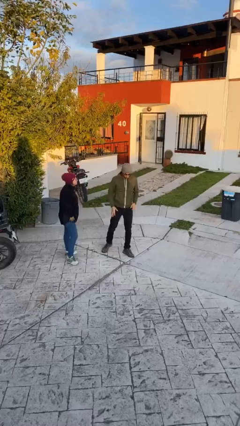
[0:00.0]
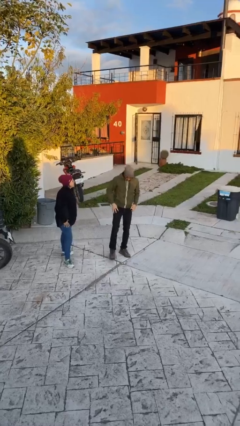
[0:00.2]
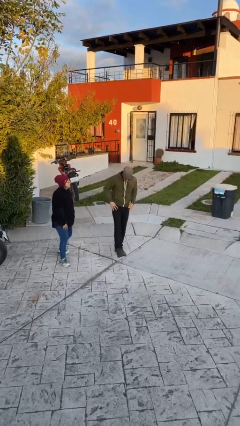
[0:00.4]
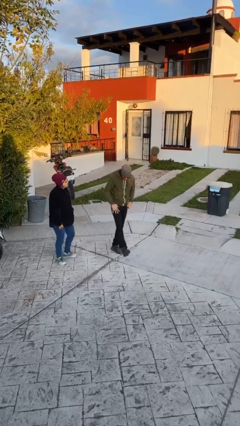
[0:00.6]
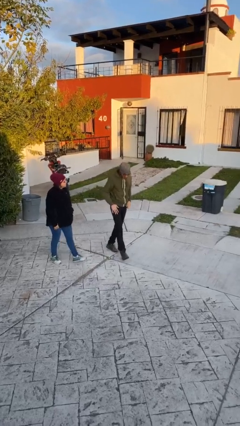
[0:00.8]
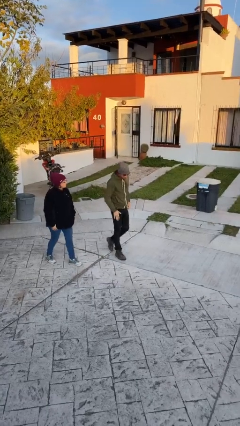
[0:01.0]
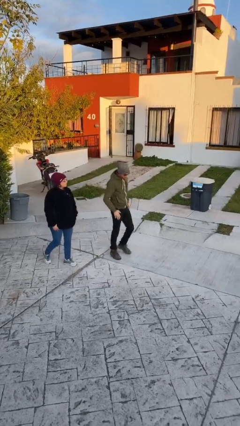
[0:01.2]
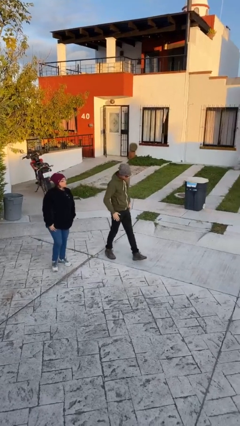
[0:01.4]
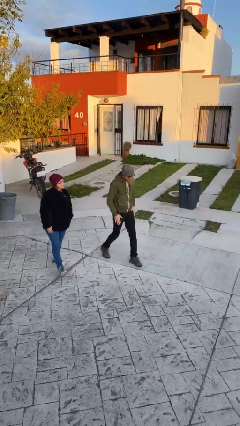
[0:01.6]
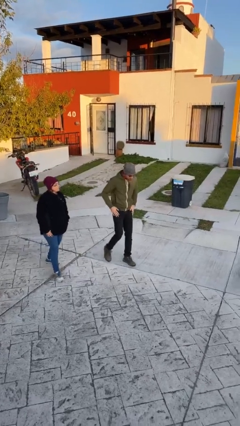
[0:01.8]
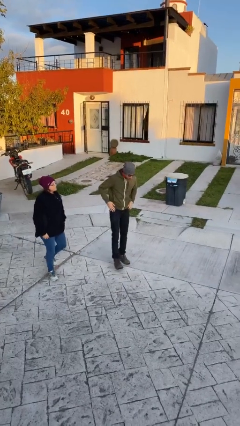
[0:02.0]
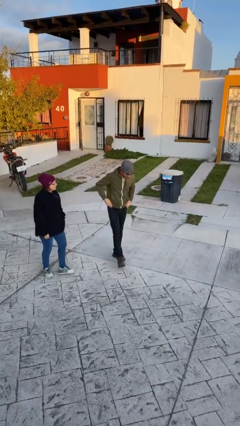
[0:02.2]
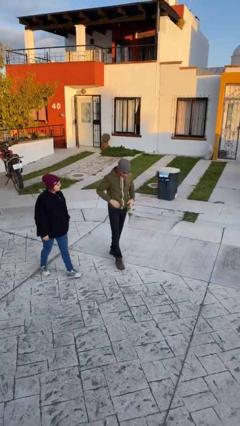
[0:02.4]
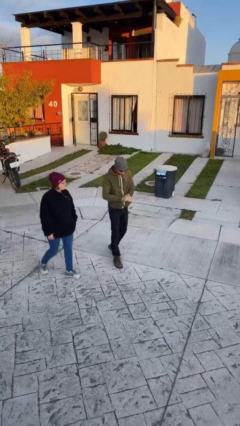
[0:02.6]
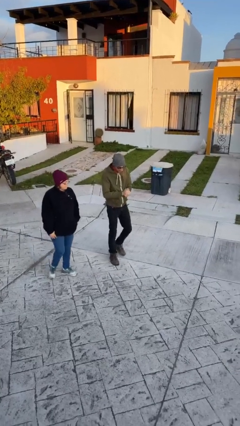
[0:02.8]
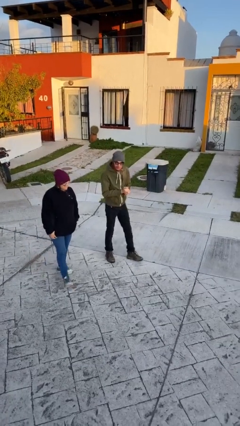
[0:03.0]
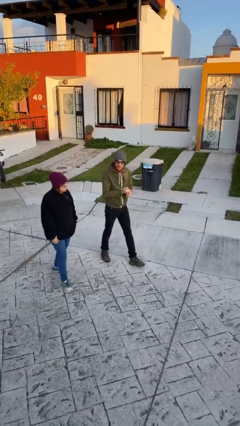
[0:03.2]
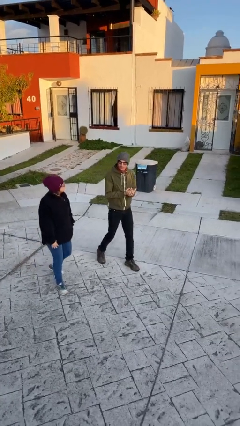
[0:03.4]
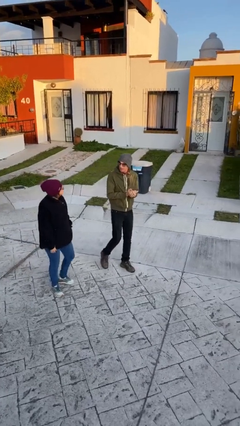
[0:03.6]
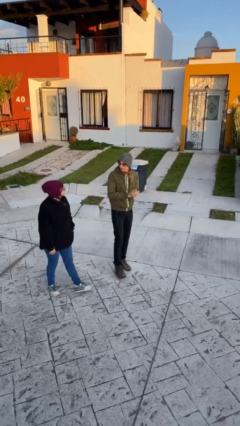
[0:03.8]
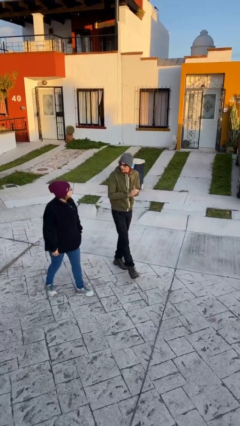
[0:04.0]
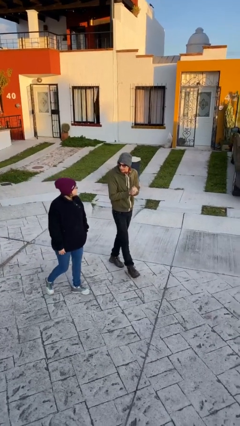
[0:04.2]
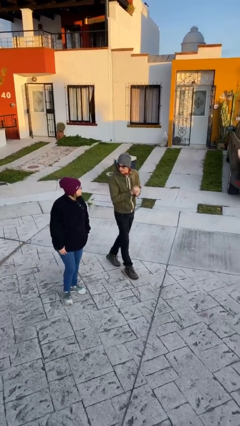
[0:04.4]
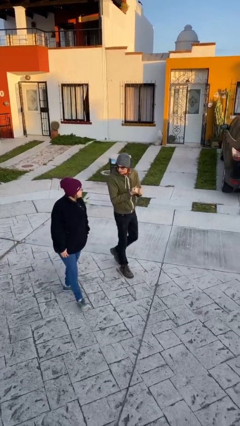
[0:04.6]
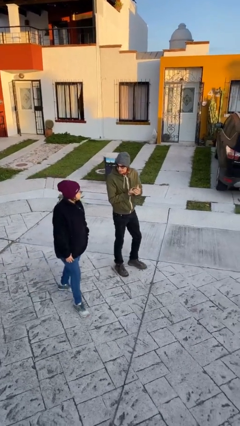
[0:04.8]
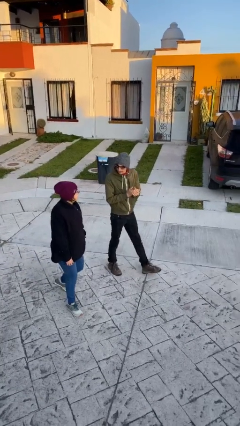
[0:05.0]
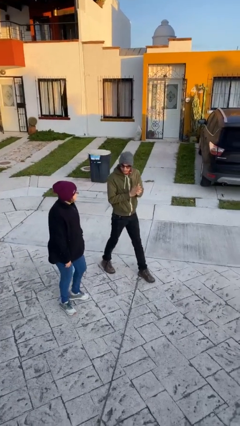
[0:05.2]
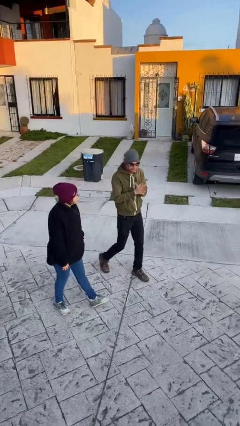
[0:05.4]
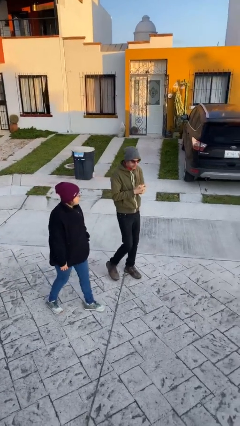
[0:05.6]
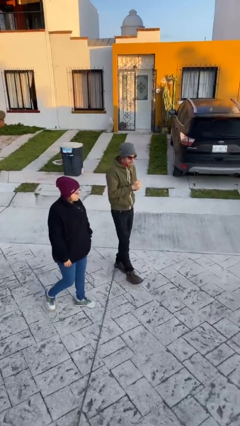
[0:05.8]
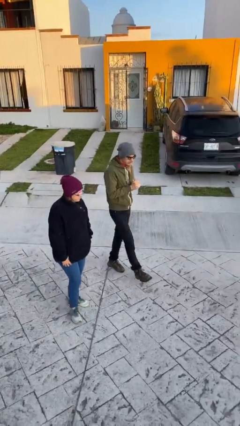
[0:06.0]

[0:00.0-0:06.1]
person talks to person

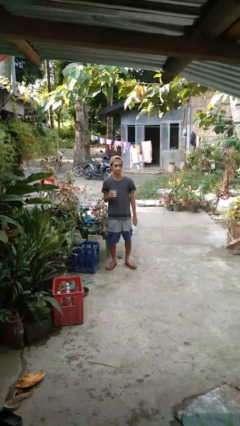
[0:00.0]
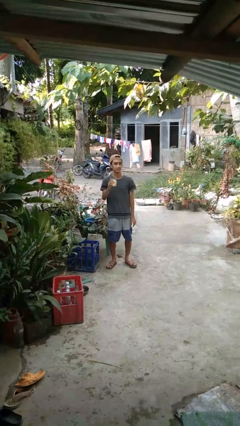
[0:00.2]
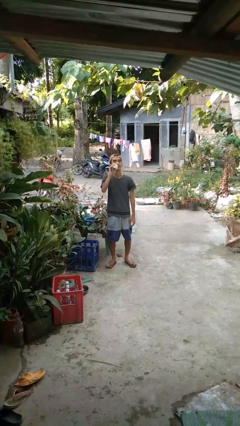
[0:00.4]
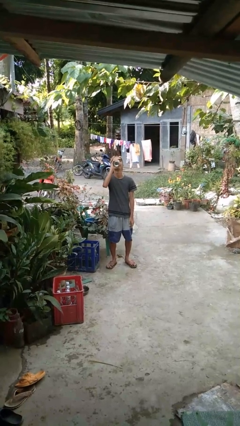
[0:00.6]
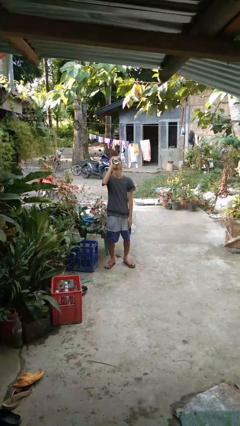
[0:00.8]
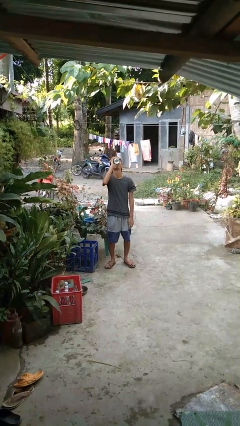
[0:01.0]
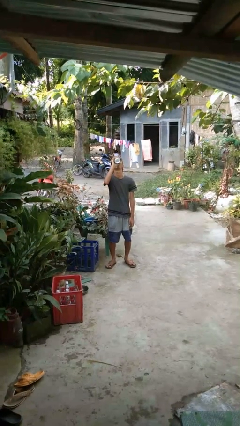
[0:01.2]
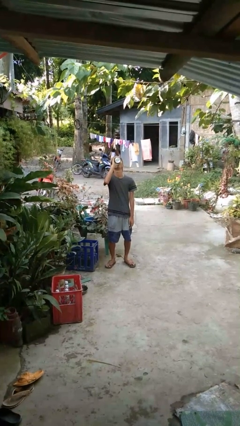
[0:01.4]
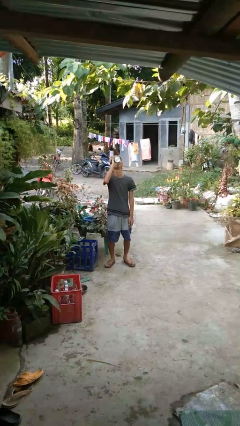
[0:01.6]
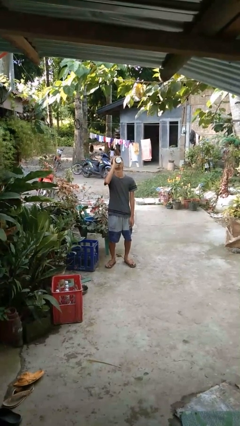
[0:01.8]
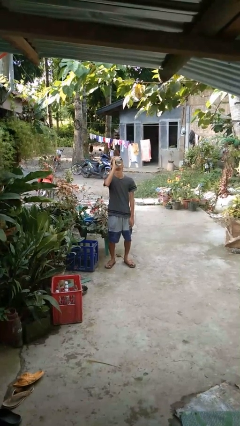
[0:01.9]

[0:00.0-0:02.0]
person drinks from beverage can

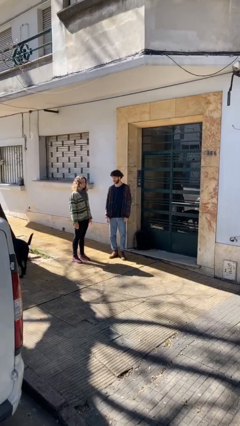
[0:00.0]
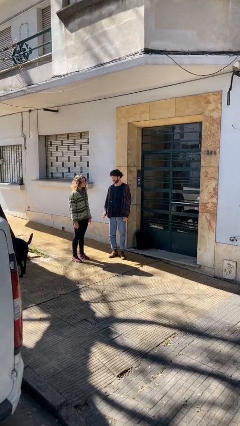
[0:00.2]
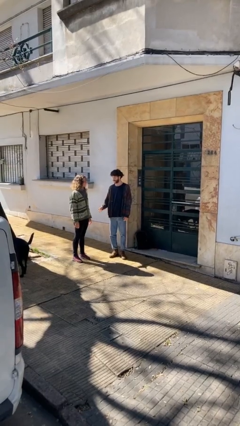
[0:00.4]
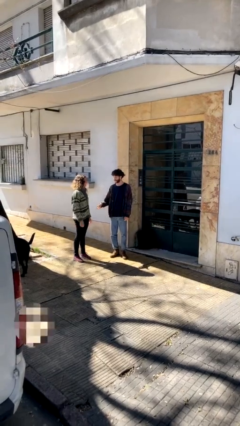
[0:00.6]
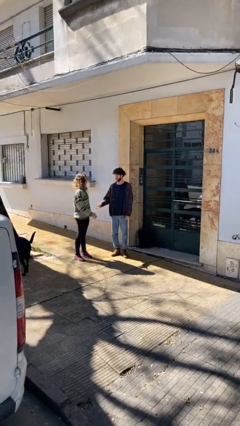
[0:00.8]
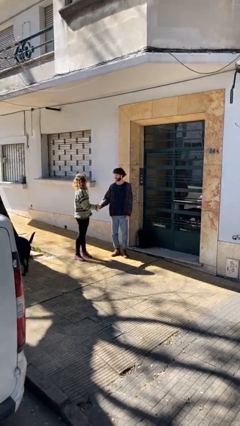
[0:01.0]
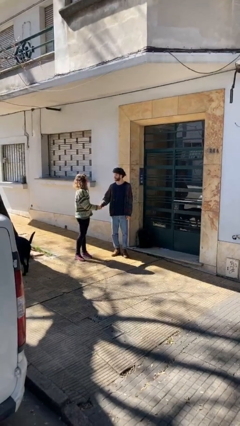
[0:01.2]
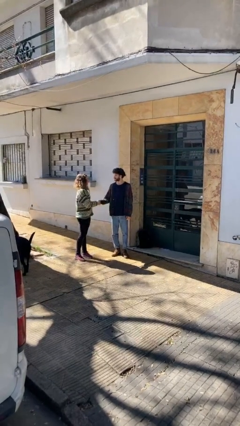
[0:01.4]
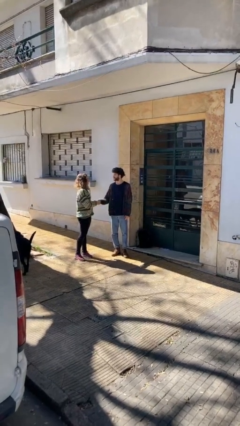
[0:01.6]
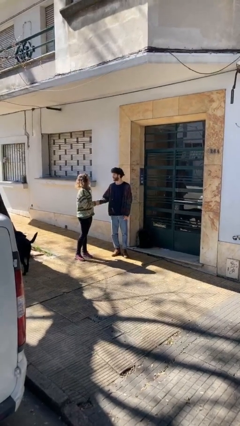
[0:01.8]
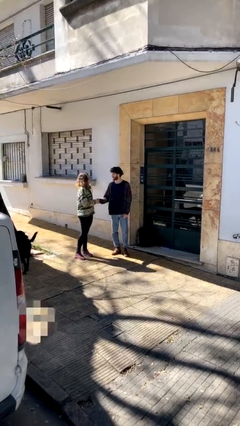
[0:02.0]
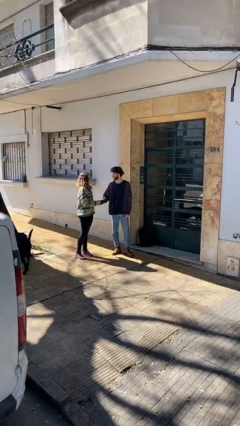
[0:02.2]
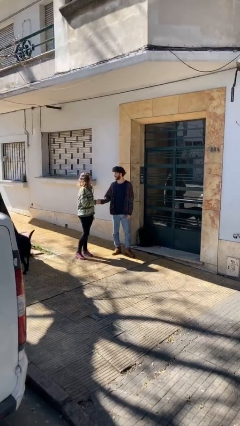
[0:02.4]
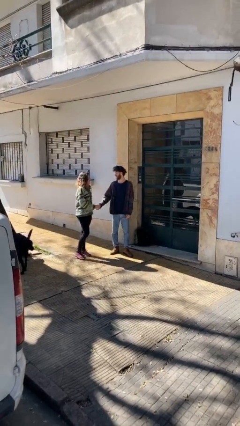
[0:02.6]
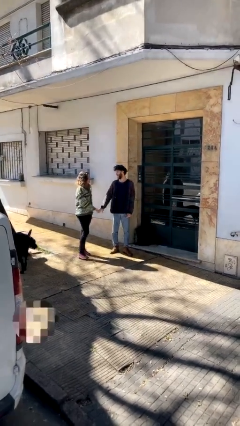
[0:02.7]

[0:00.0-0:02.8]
person shakes hand

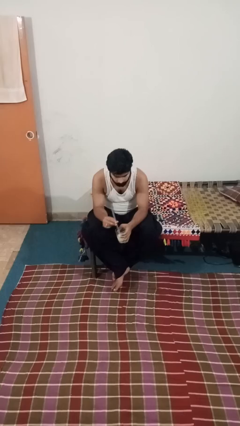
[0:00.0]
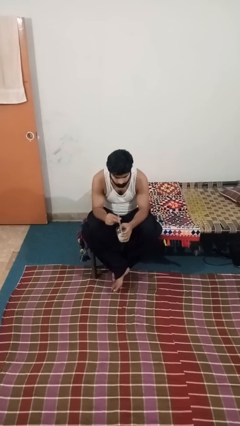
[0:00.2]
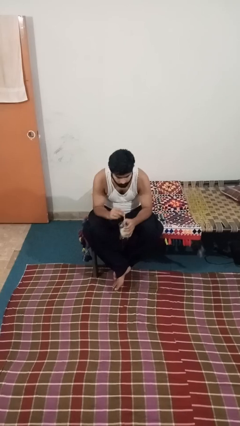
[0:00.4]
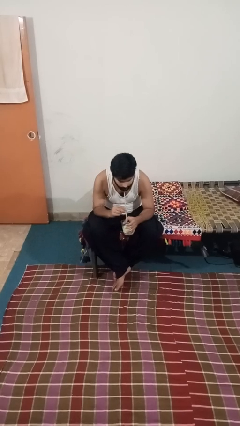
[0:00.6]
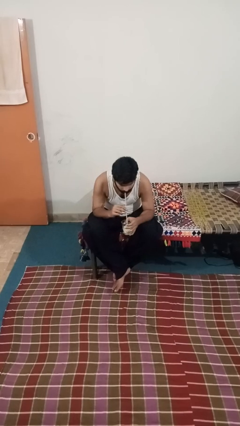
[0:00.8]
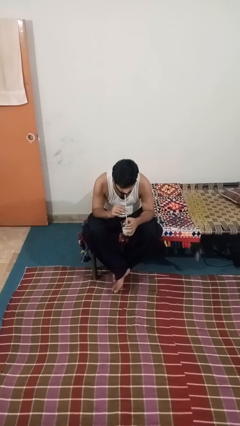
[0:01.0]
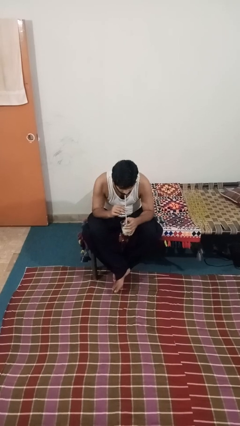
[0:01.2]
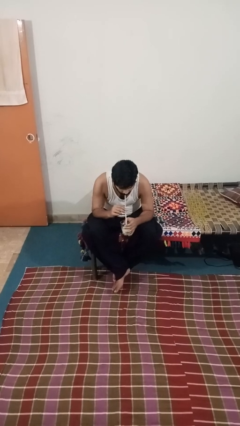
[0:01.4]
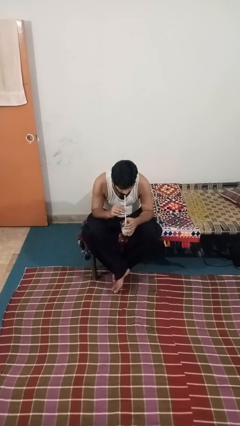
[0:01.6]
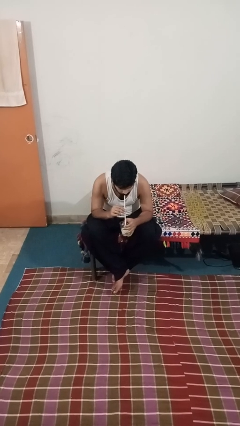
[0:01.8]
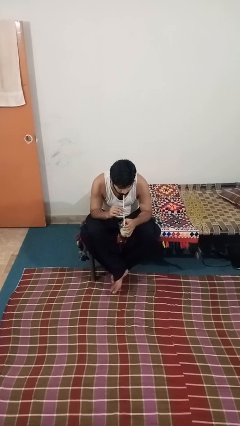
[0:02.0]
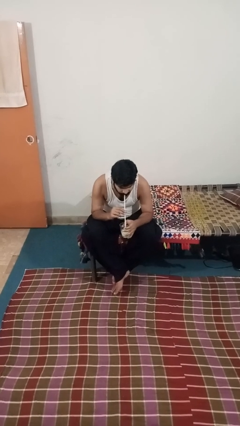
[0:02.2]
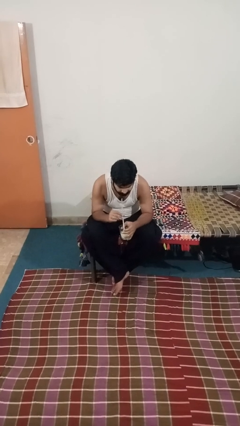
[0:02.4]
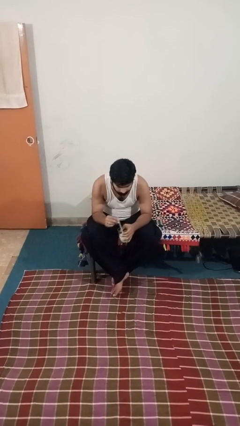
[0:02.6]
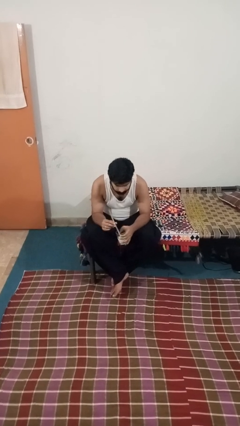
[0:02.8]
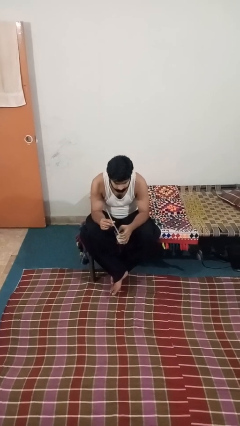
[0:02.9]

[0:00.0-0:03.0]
person drinks from straw

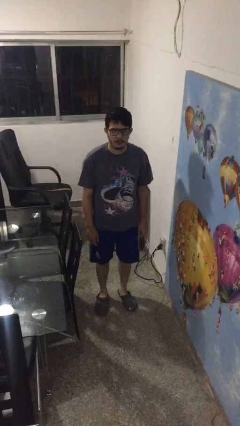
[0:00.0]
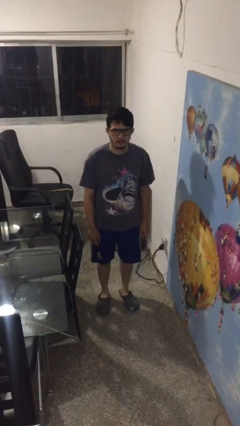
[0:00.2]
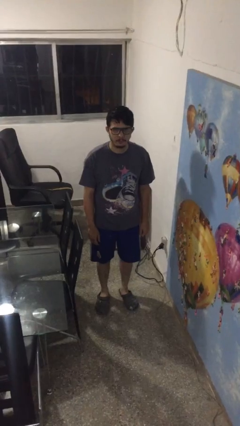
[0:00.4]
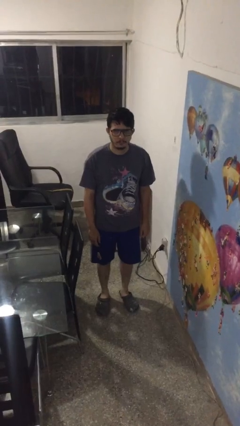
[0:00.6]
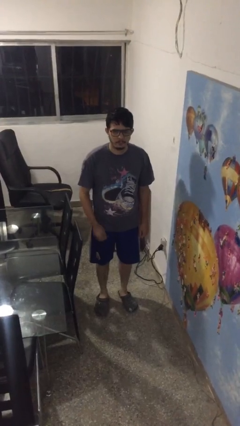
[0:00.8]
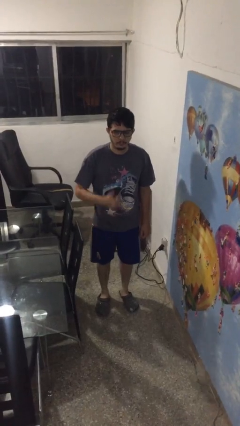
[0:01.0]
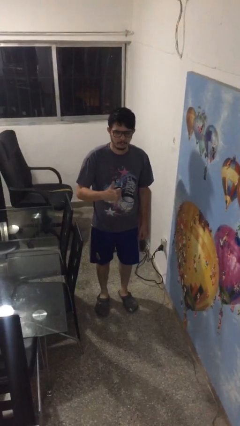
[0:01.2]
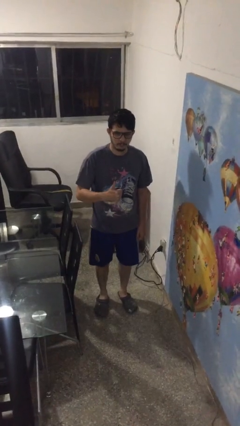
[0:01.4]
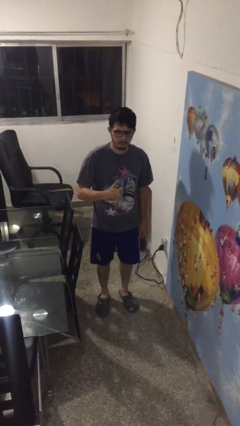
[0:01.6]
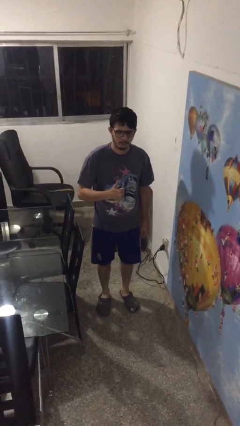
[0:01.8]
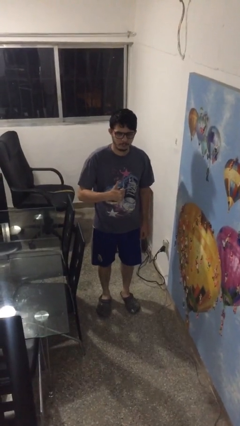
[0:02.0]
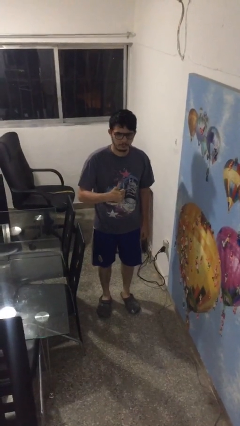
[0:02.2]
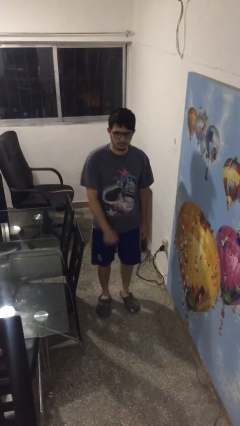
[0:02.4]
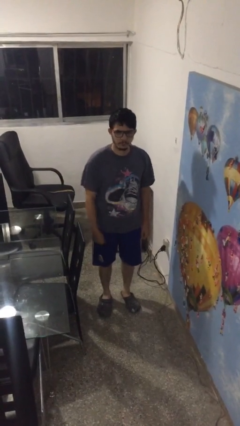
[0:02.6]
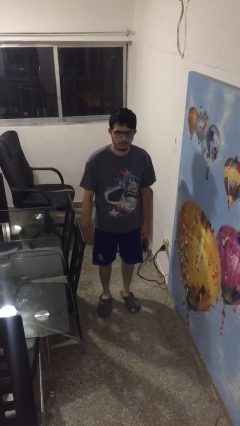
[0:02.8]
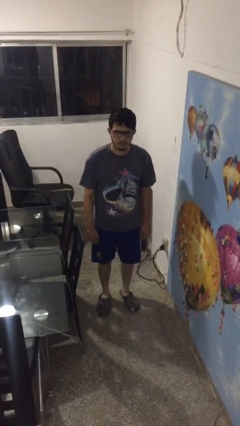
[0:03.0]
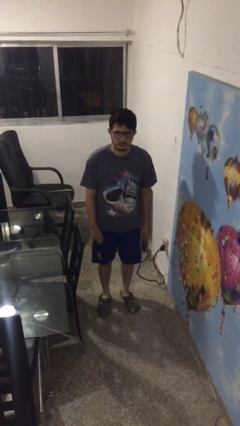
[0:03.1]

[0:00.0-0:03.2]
person gestures thumbs up

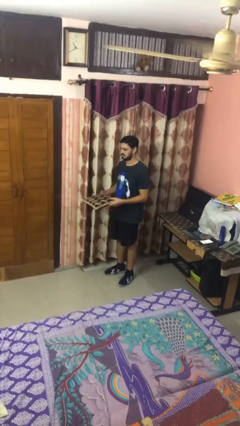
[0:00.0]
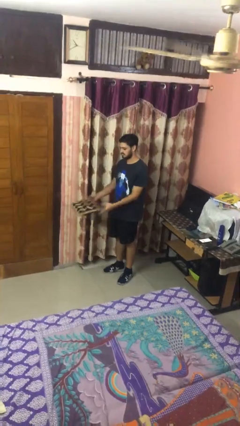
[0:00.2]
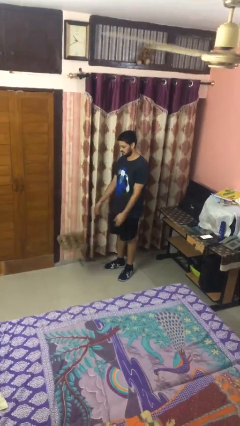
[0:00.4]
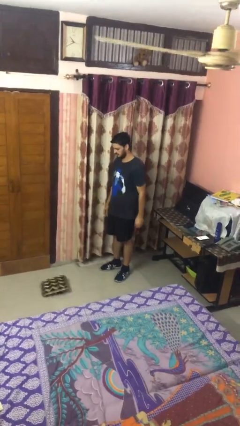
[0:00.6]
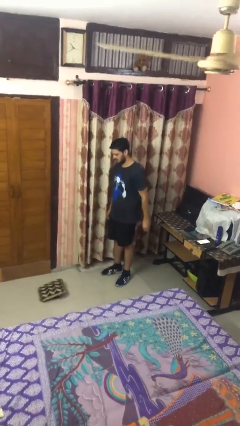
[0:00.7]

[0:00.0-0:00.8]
person throws object to ground
